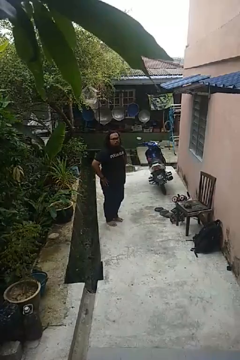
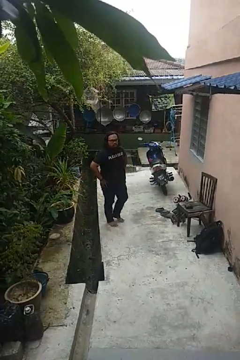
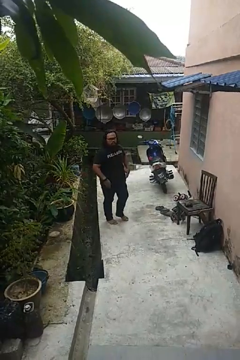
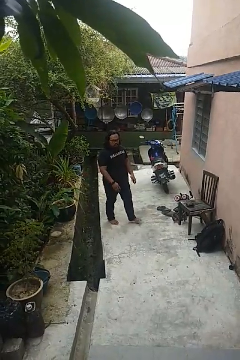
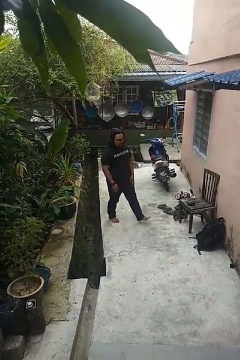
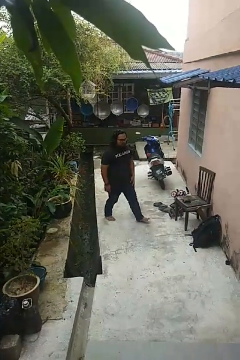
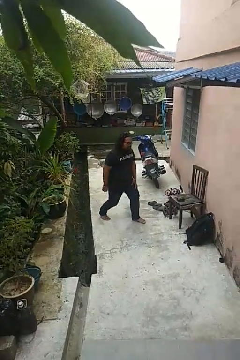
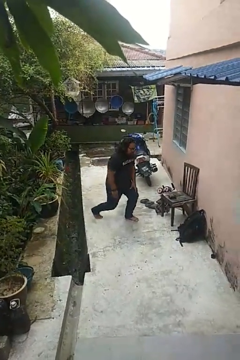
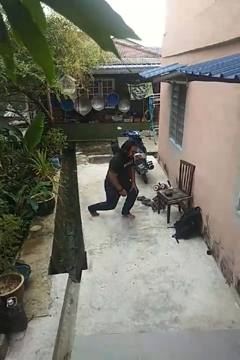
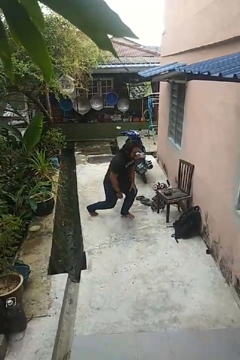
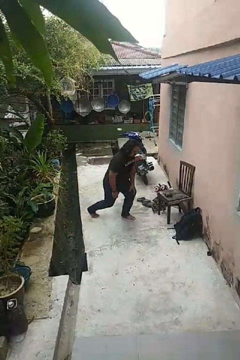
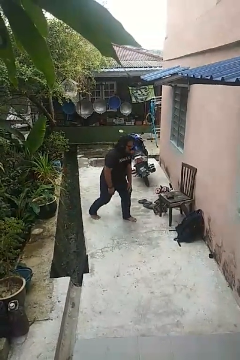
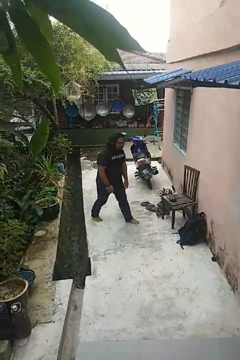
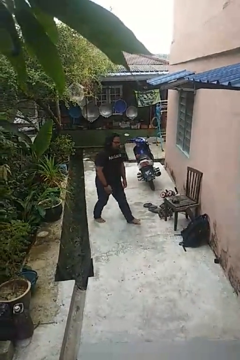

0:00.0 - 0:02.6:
person exercises with lunges

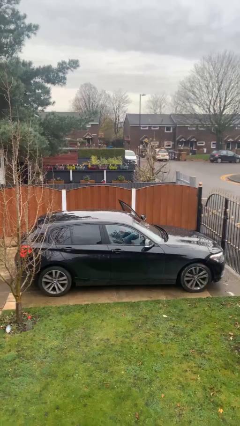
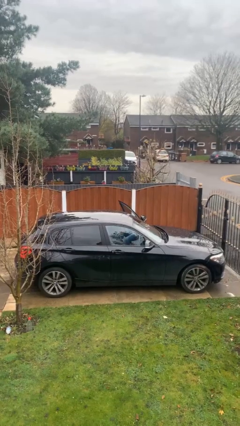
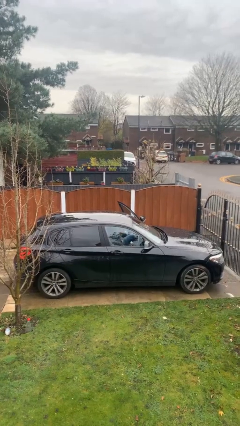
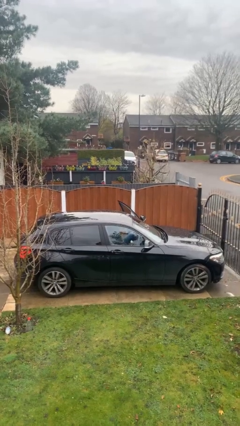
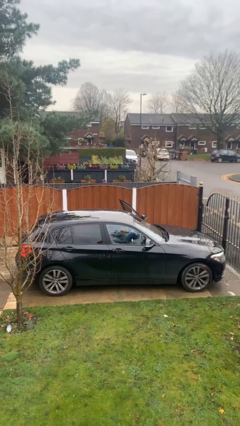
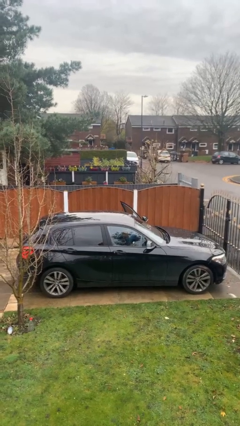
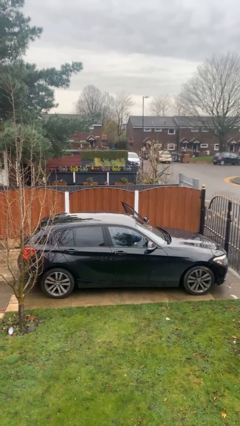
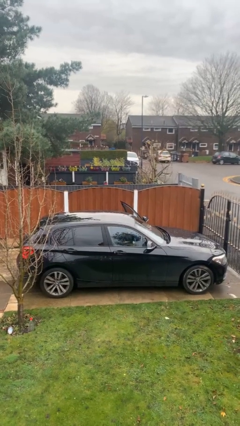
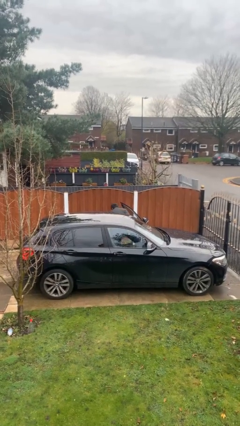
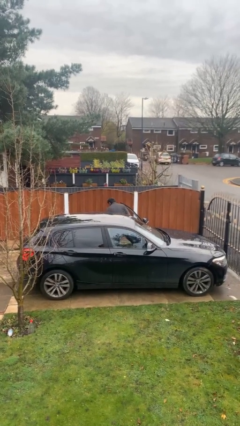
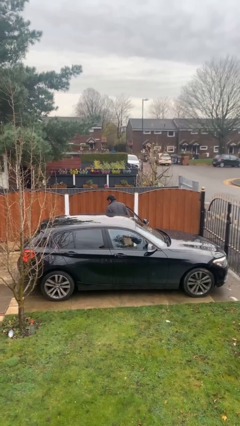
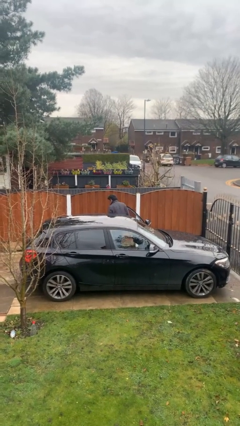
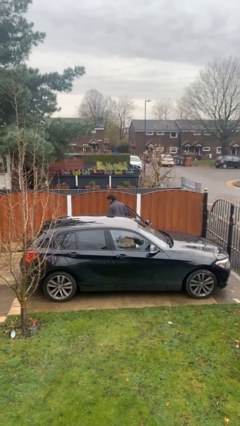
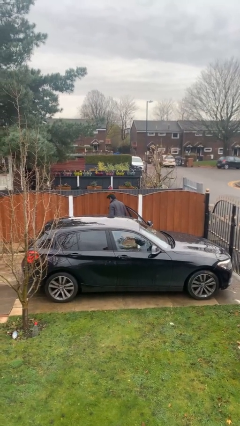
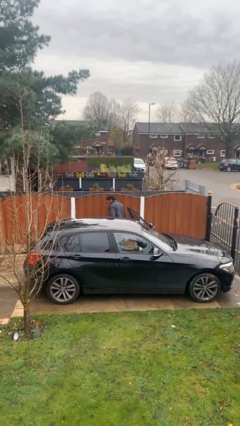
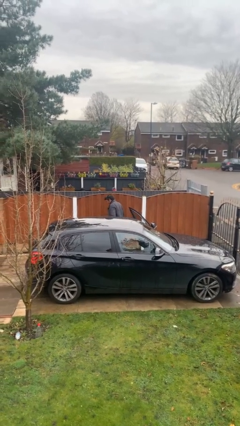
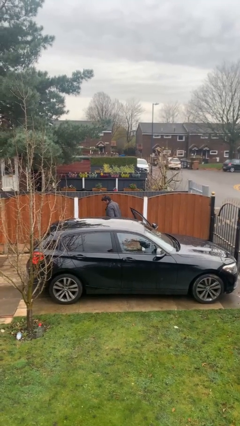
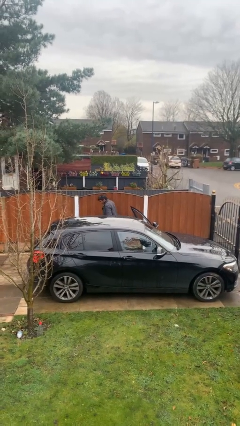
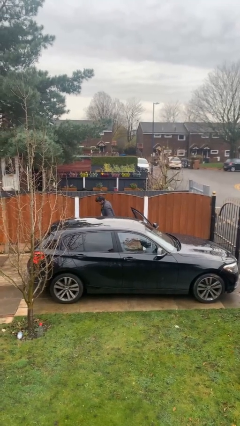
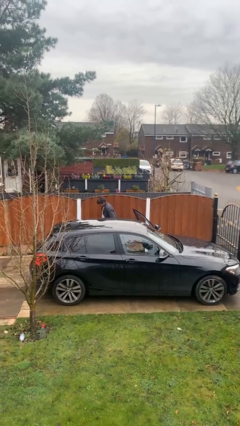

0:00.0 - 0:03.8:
person exits car

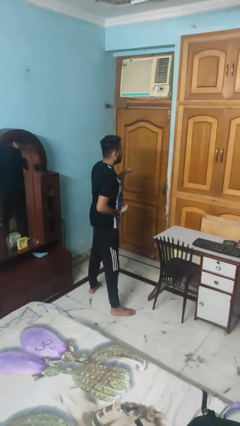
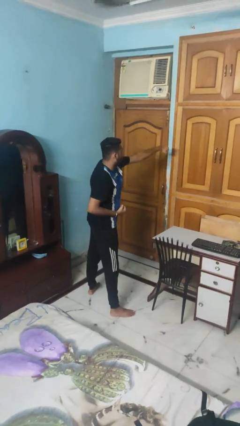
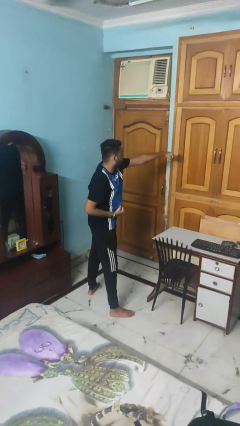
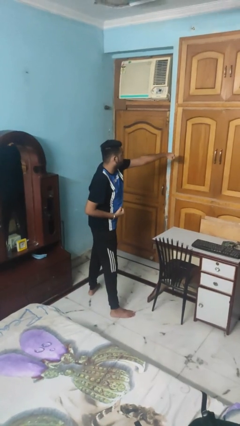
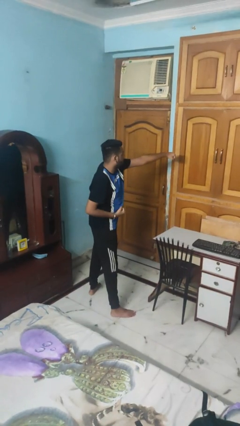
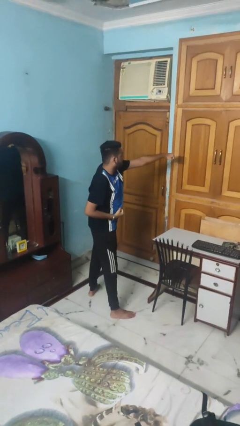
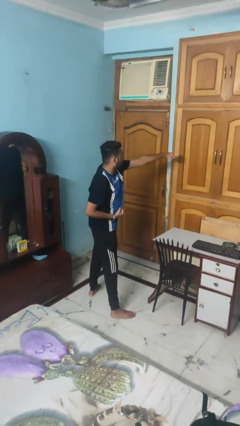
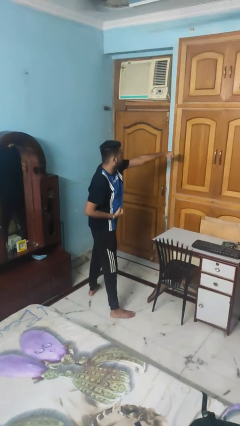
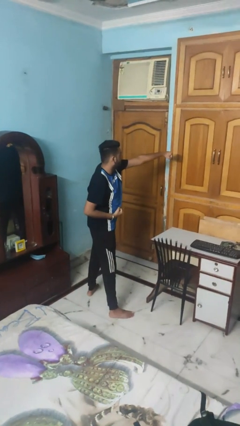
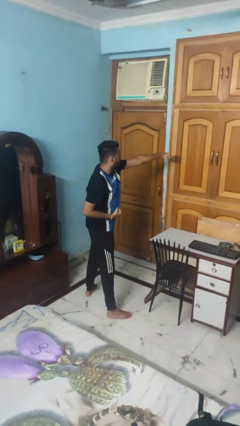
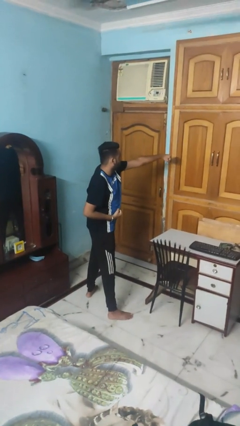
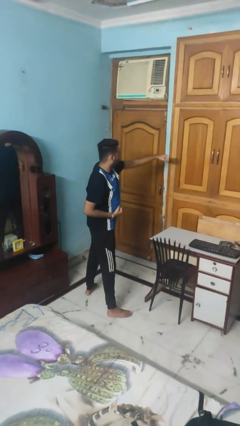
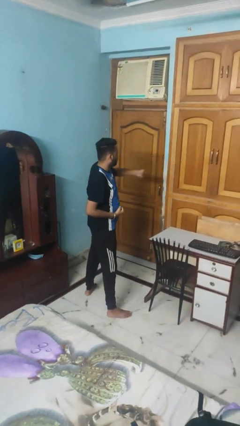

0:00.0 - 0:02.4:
person punches

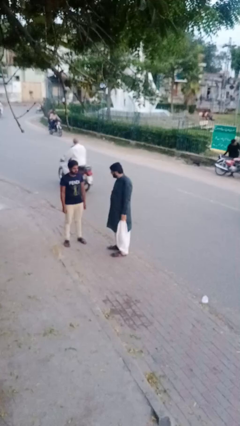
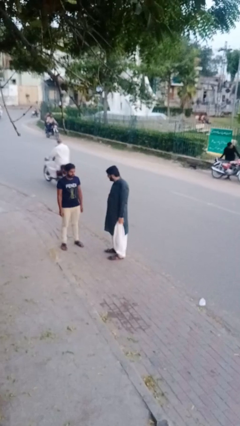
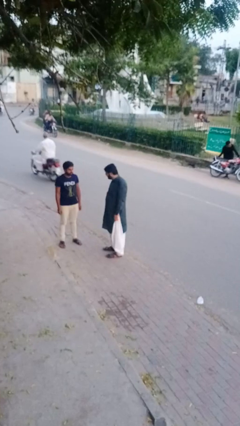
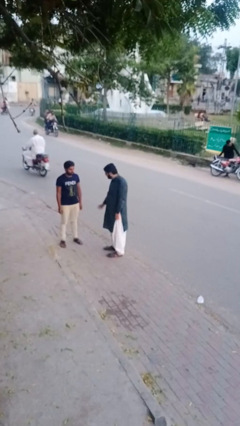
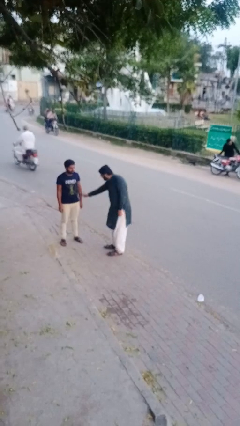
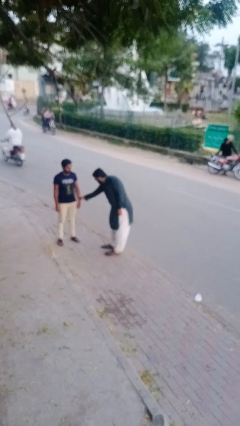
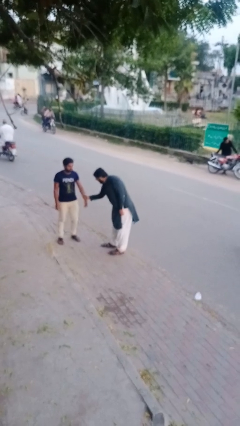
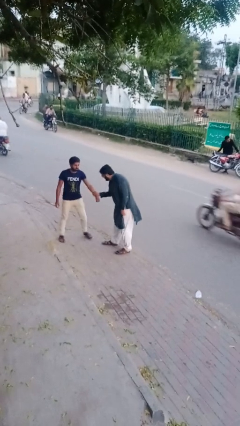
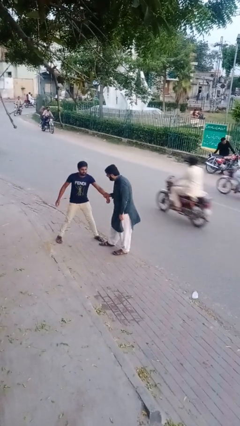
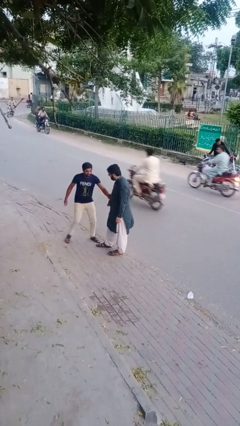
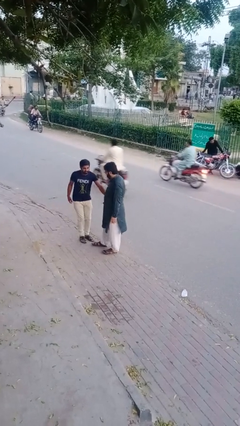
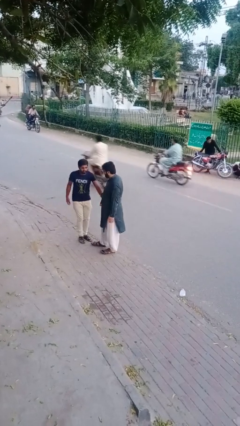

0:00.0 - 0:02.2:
person grabs person by forearm

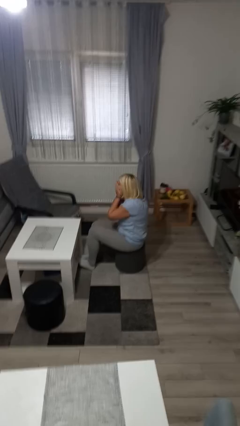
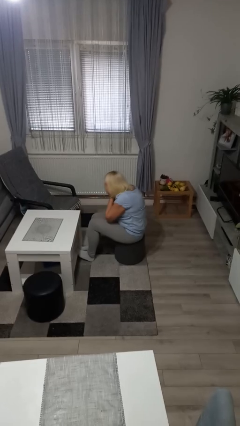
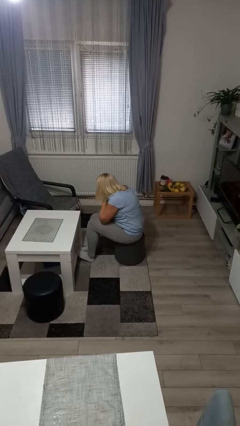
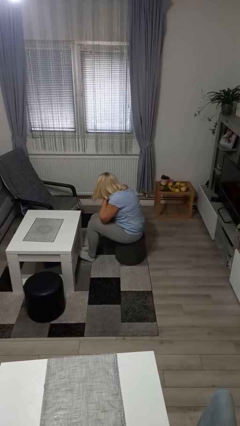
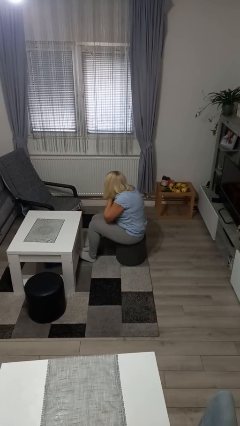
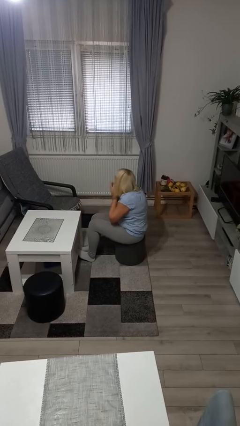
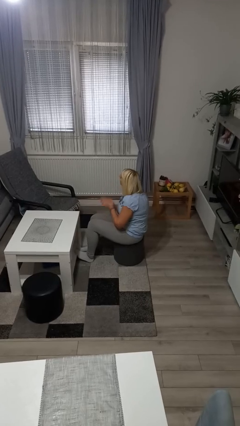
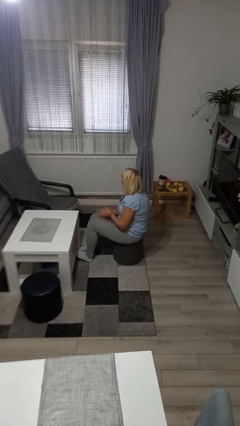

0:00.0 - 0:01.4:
person sneezes into hand

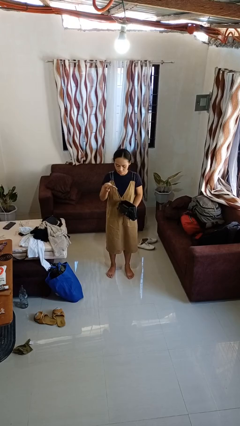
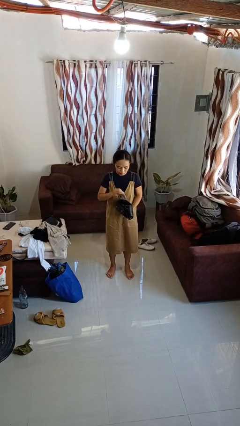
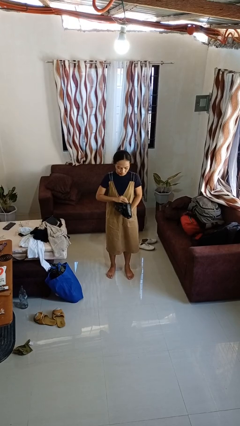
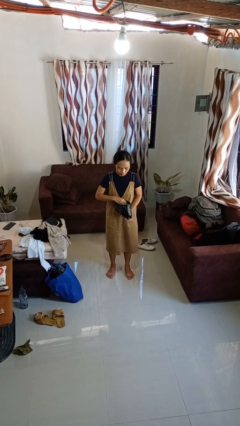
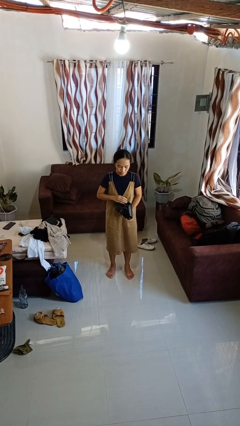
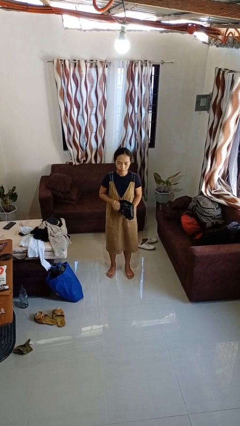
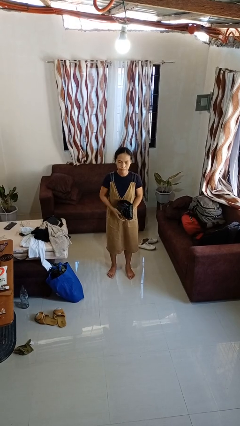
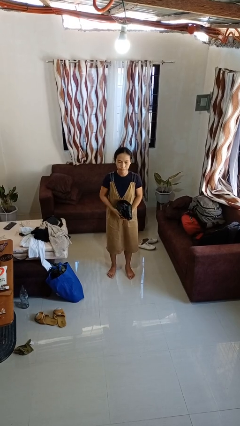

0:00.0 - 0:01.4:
person puts object into purse

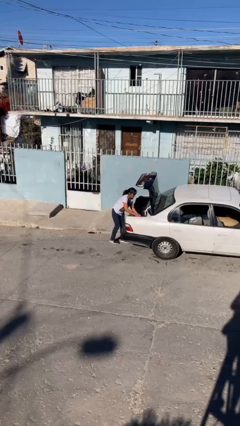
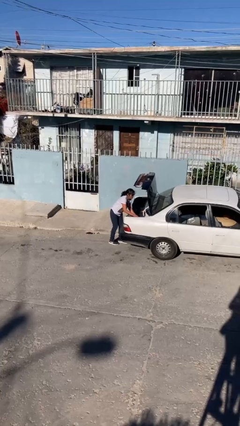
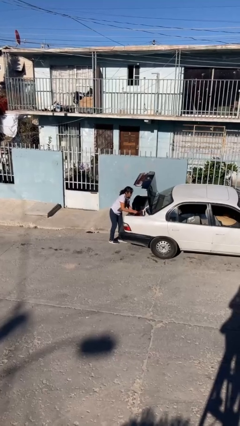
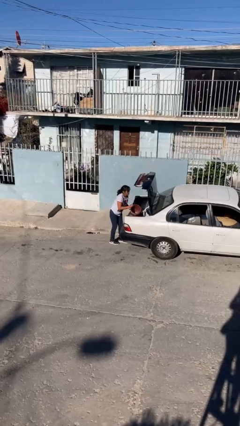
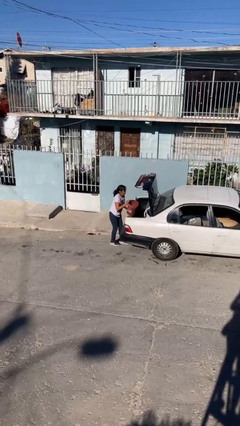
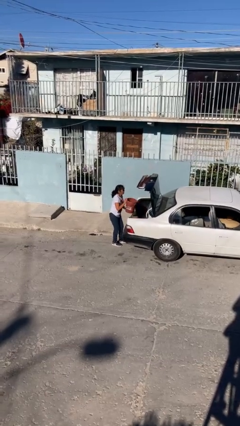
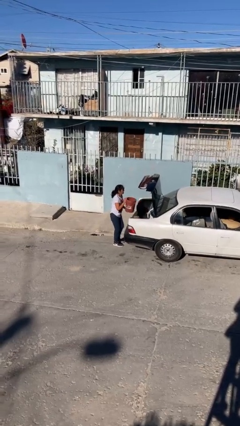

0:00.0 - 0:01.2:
person unloads car

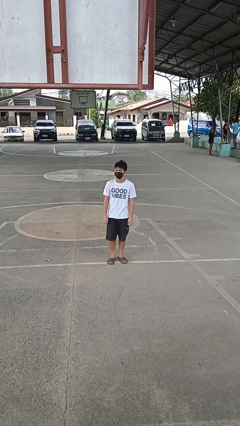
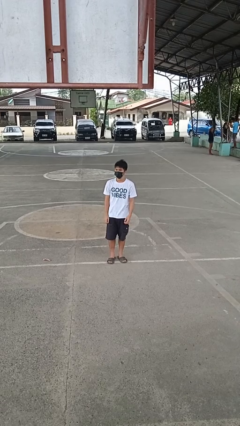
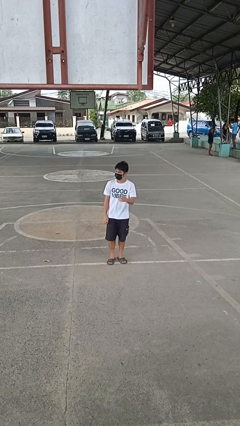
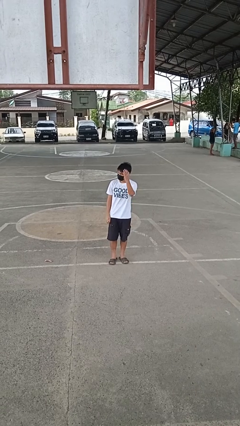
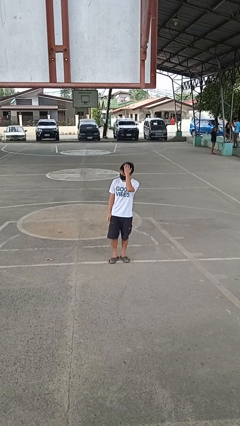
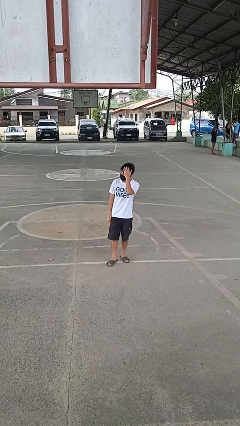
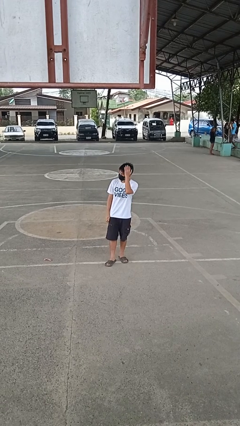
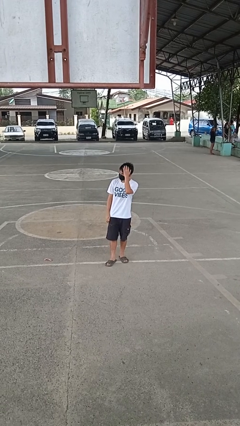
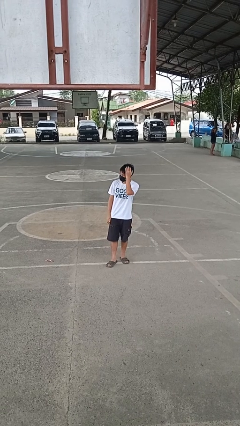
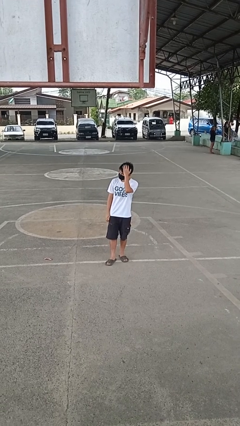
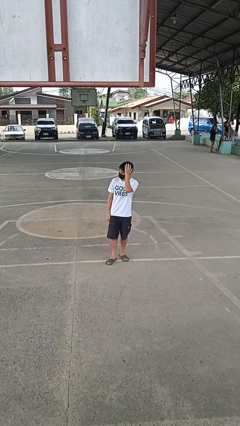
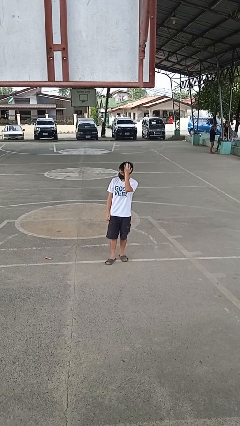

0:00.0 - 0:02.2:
person pats head
